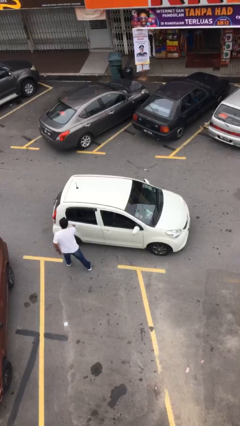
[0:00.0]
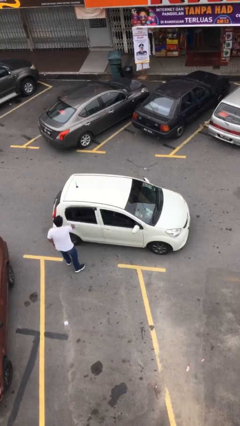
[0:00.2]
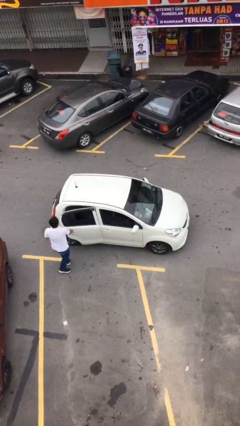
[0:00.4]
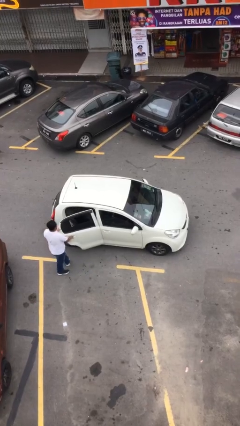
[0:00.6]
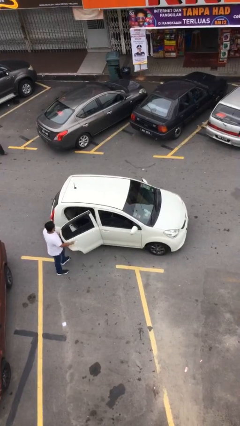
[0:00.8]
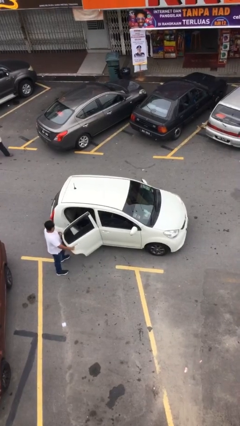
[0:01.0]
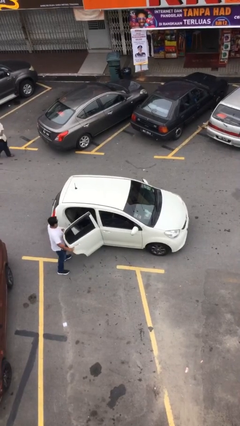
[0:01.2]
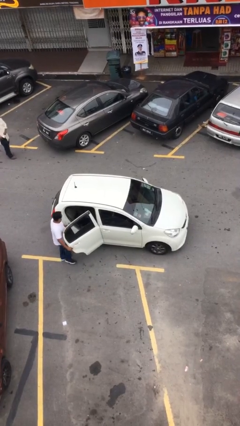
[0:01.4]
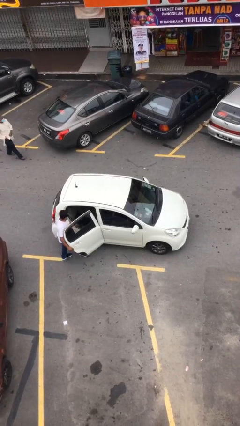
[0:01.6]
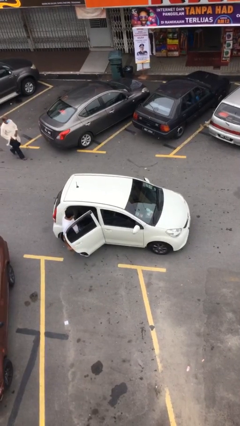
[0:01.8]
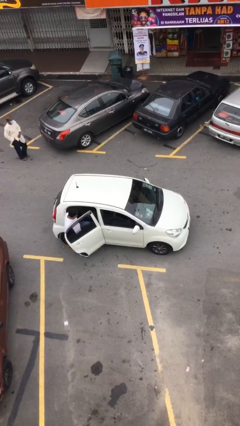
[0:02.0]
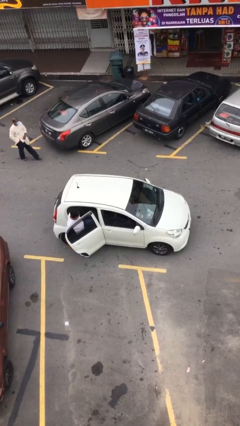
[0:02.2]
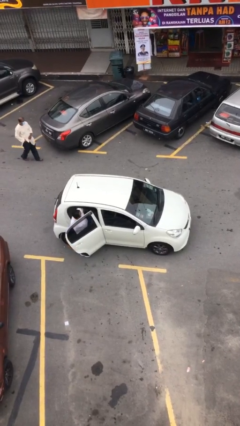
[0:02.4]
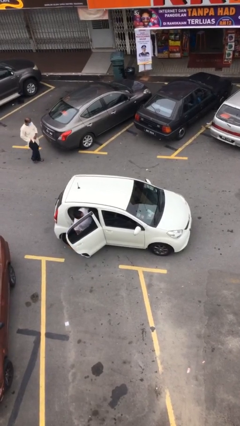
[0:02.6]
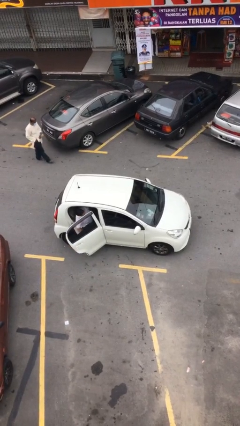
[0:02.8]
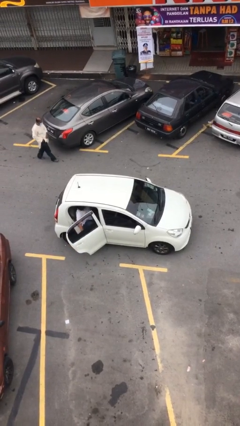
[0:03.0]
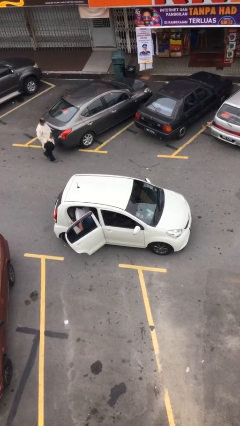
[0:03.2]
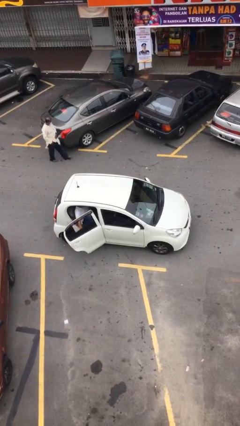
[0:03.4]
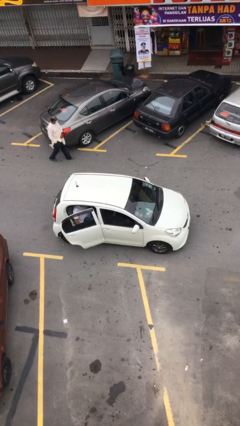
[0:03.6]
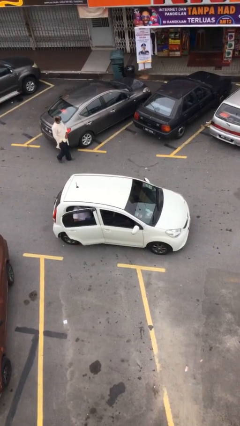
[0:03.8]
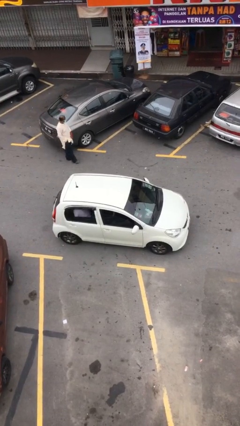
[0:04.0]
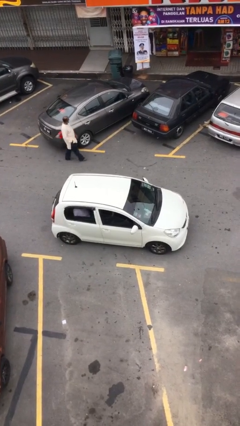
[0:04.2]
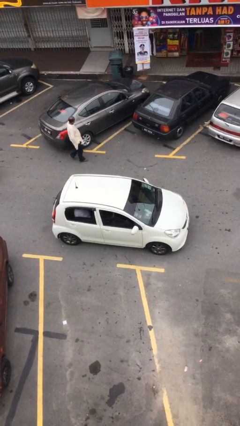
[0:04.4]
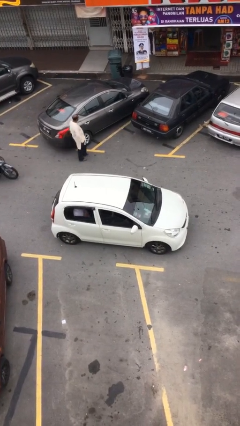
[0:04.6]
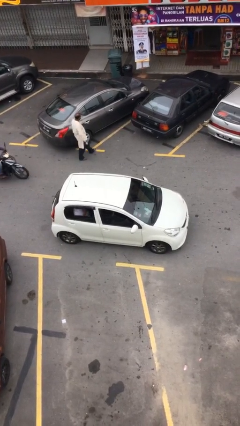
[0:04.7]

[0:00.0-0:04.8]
car picks up person

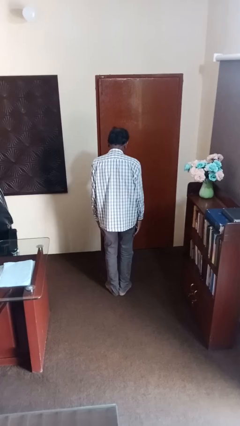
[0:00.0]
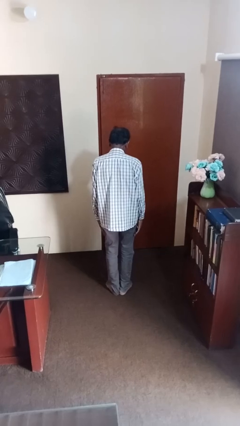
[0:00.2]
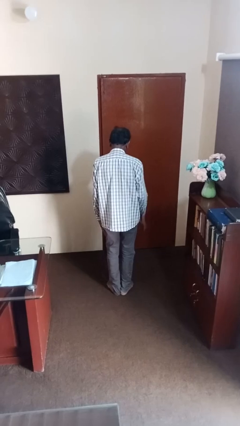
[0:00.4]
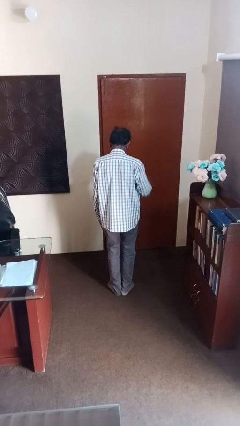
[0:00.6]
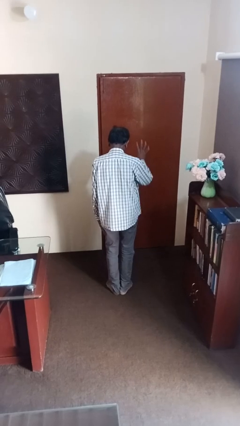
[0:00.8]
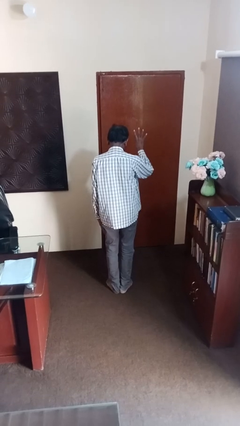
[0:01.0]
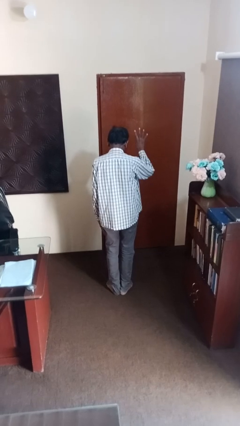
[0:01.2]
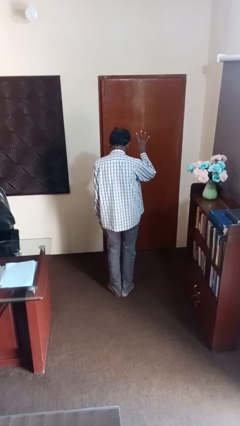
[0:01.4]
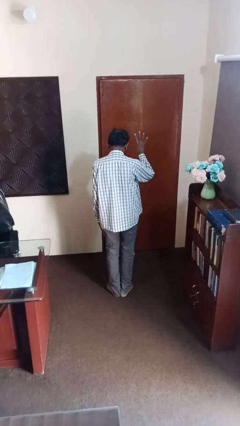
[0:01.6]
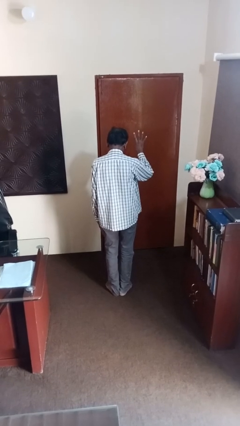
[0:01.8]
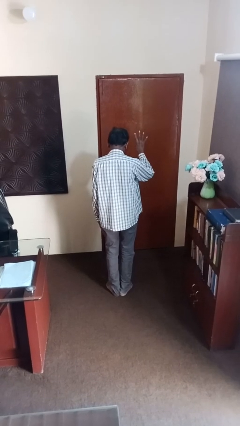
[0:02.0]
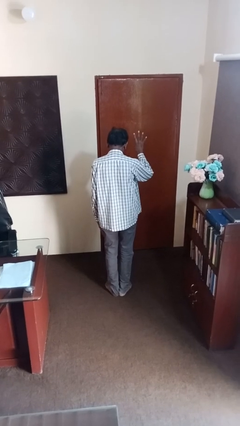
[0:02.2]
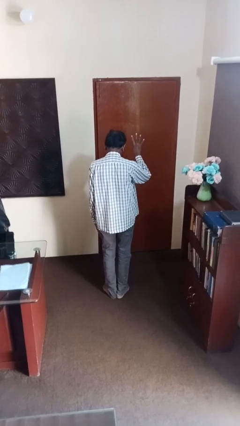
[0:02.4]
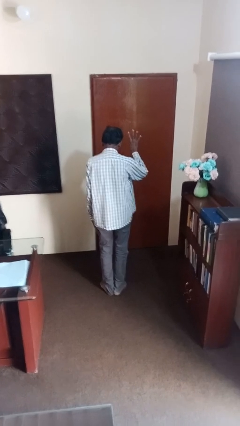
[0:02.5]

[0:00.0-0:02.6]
person gestures number four

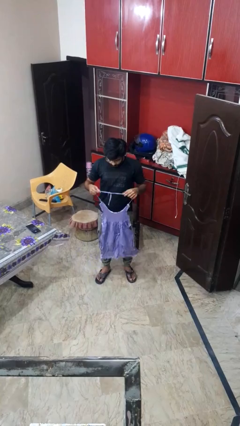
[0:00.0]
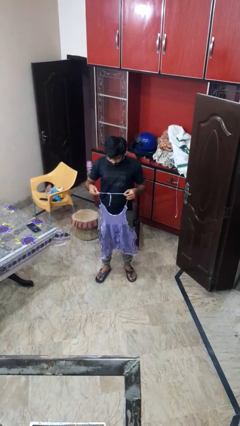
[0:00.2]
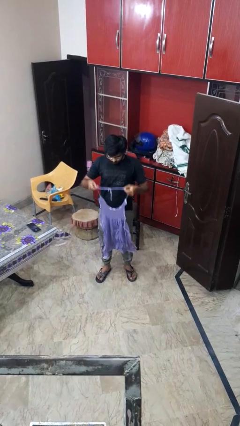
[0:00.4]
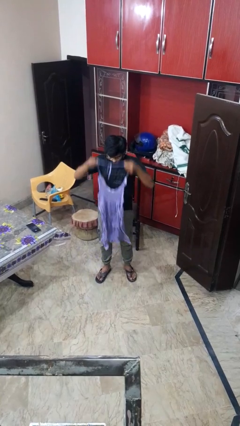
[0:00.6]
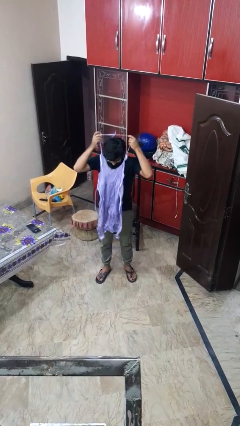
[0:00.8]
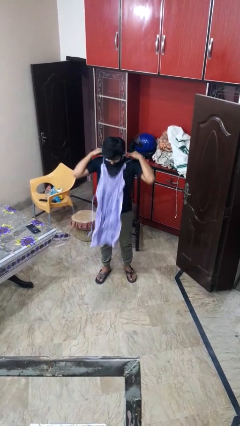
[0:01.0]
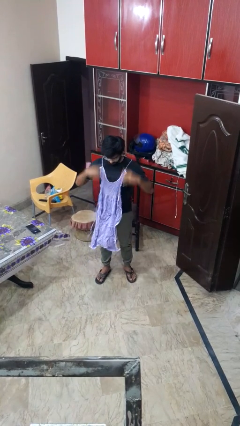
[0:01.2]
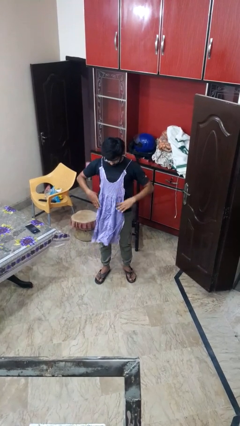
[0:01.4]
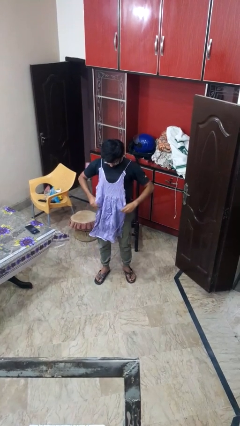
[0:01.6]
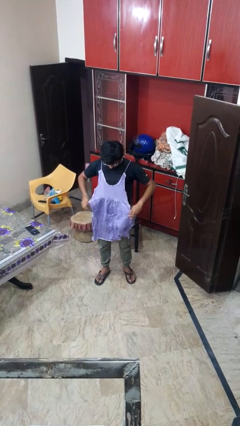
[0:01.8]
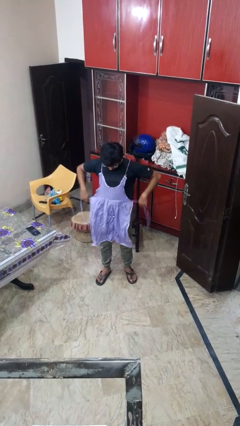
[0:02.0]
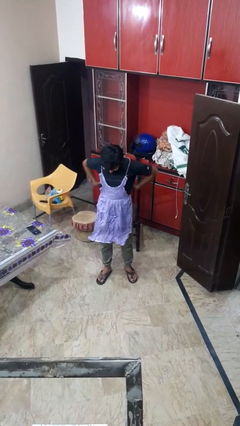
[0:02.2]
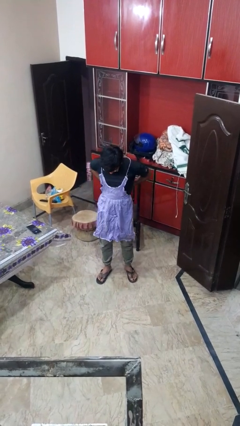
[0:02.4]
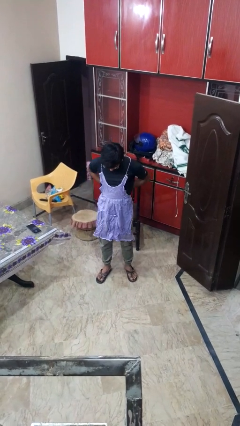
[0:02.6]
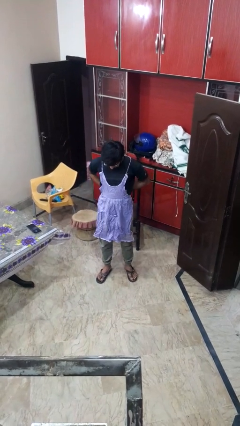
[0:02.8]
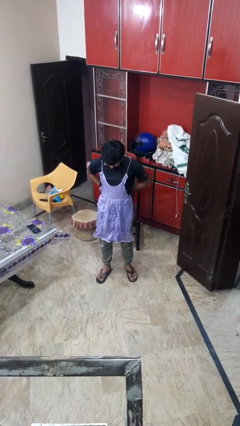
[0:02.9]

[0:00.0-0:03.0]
person puts on apron

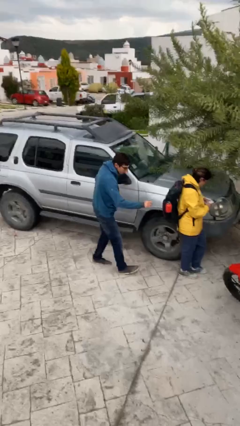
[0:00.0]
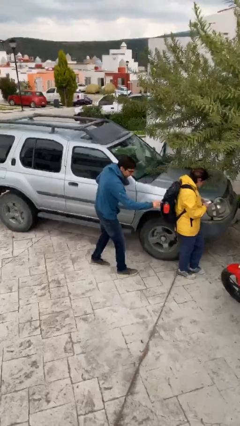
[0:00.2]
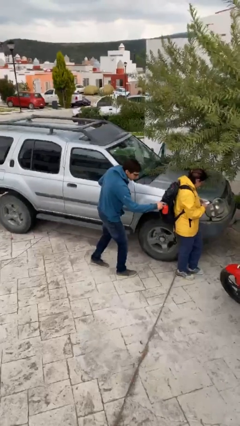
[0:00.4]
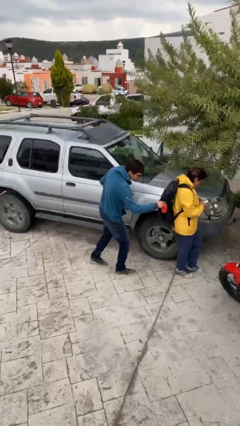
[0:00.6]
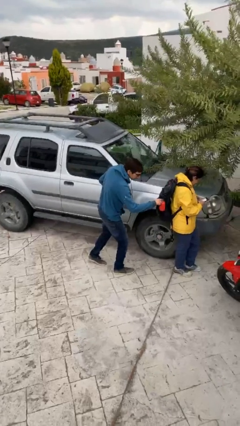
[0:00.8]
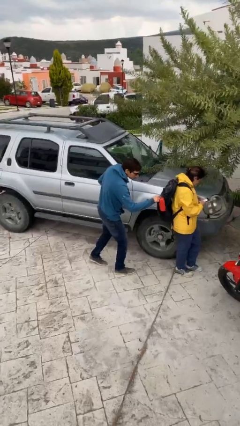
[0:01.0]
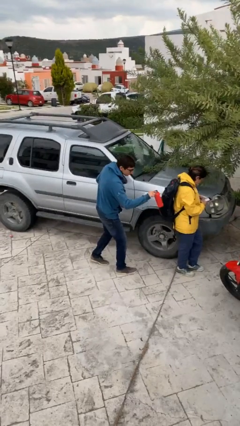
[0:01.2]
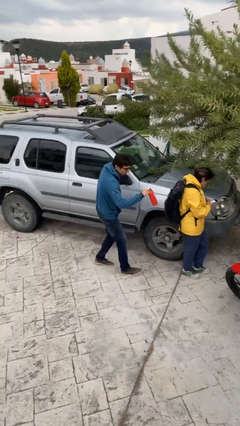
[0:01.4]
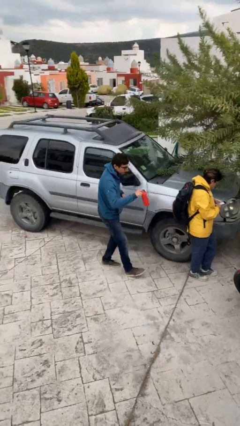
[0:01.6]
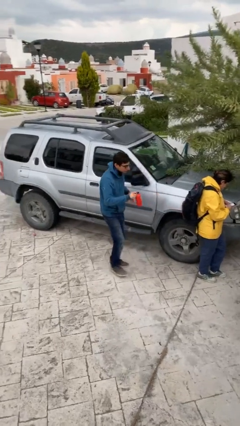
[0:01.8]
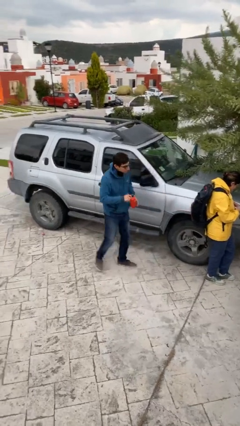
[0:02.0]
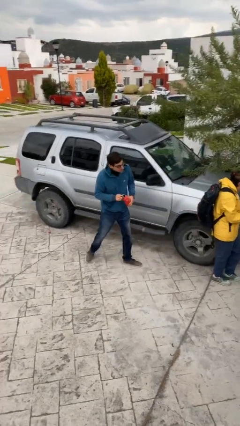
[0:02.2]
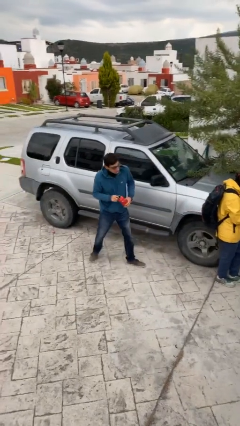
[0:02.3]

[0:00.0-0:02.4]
person steals object from person

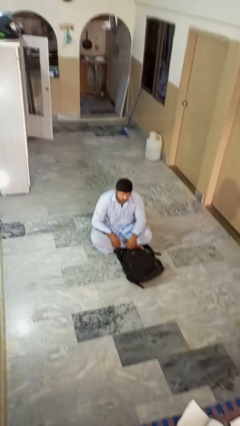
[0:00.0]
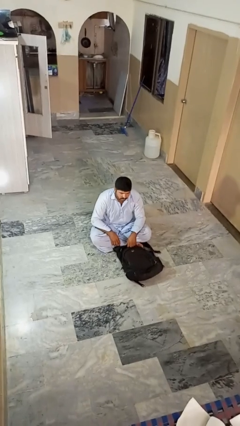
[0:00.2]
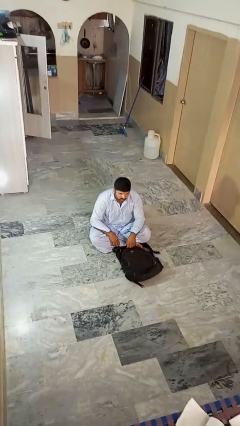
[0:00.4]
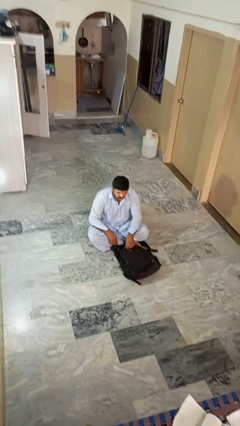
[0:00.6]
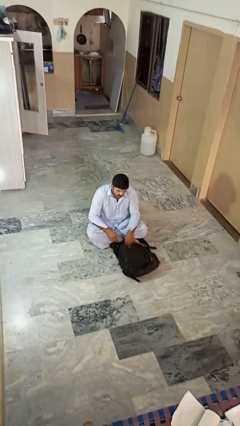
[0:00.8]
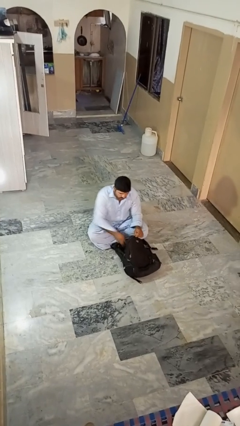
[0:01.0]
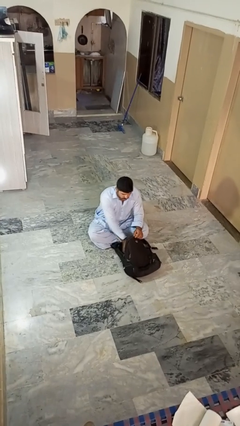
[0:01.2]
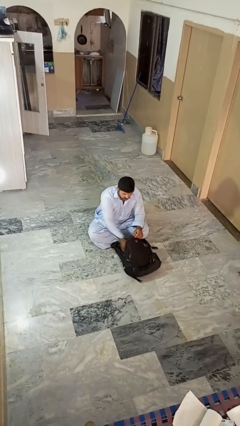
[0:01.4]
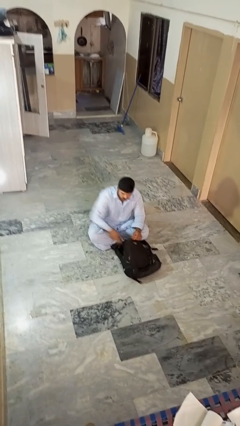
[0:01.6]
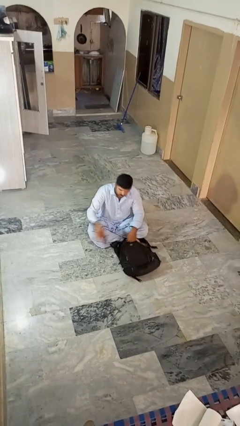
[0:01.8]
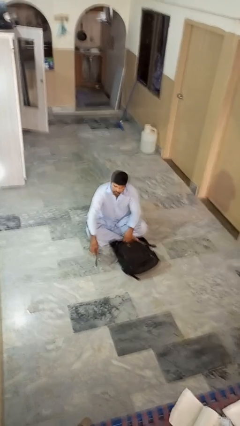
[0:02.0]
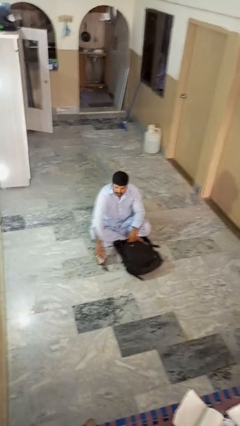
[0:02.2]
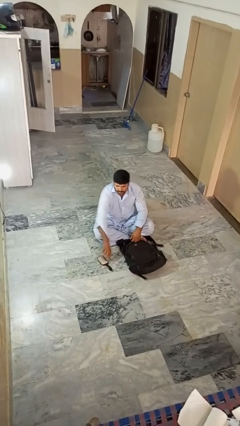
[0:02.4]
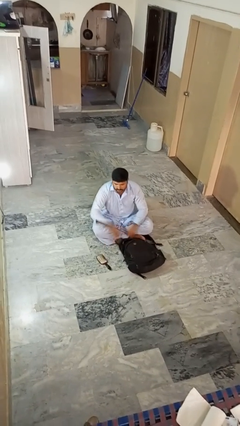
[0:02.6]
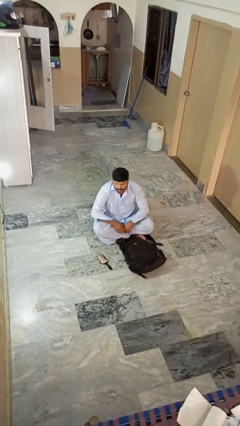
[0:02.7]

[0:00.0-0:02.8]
person takes object from bag

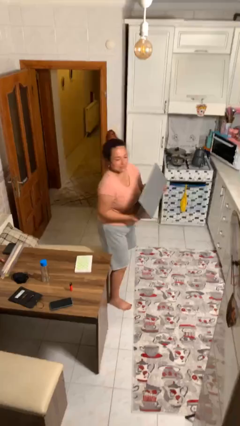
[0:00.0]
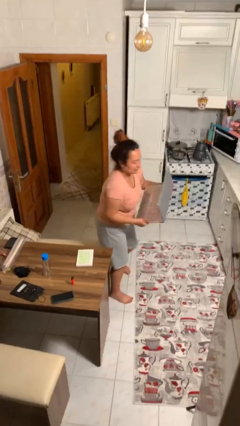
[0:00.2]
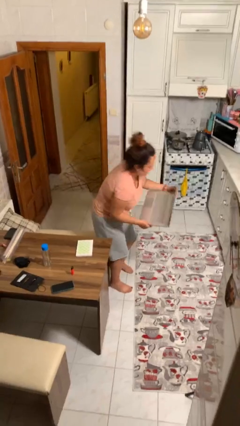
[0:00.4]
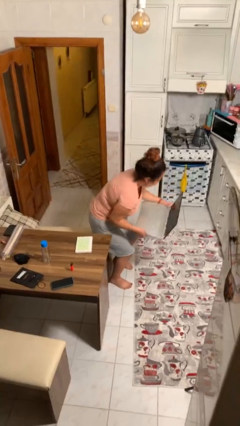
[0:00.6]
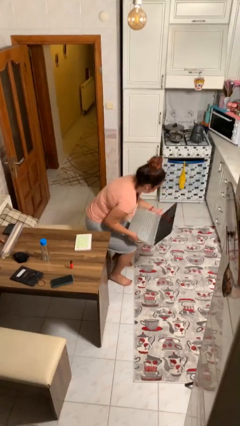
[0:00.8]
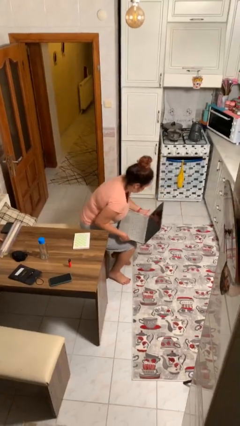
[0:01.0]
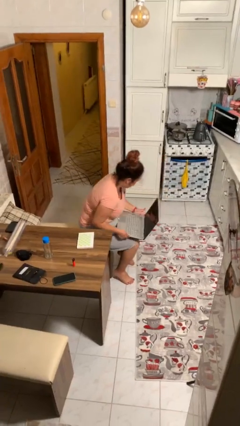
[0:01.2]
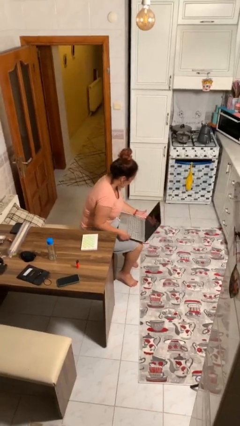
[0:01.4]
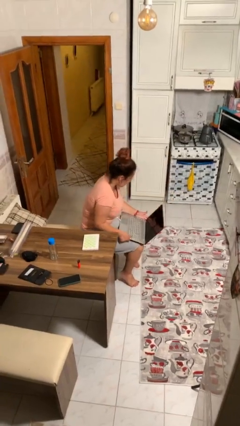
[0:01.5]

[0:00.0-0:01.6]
person sits down

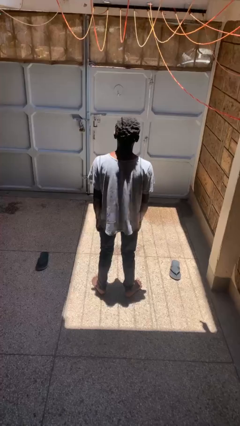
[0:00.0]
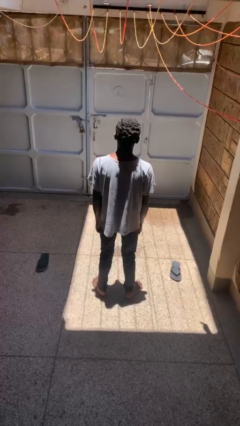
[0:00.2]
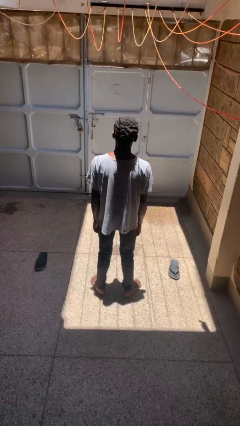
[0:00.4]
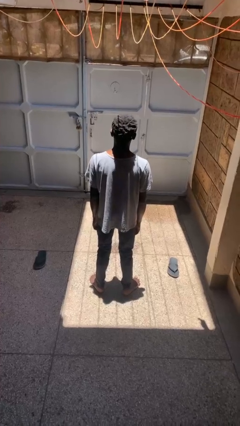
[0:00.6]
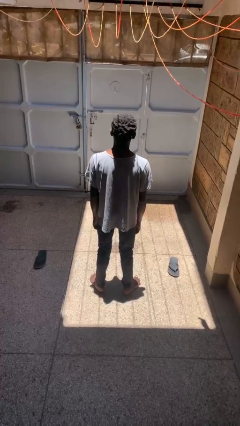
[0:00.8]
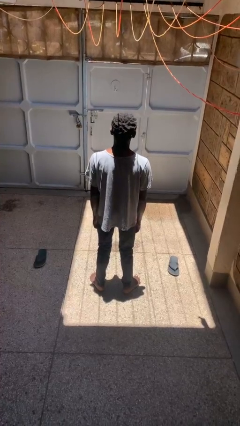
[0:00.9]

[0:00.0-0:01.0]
person shrugs
